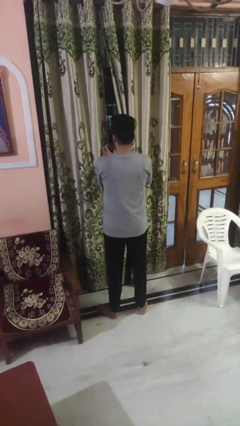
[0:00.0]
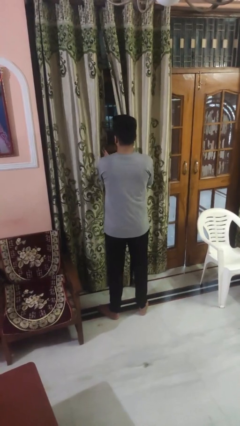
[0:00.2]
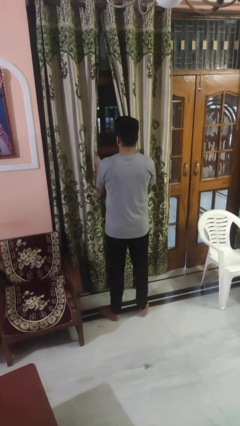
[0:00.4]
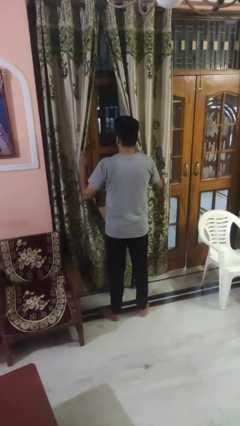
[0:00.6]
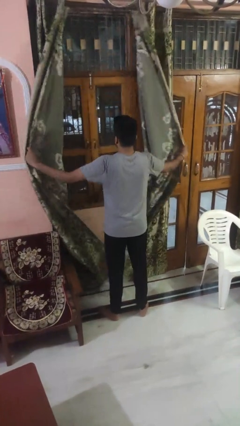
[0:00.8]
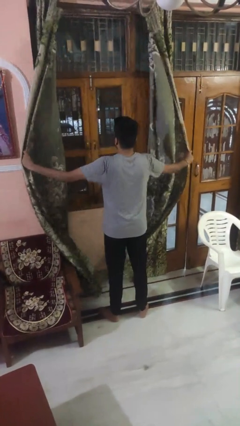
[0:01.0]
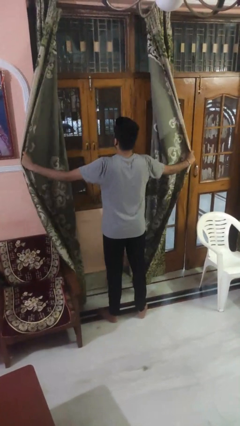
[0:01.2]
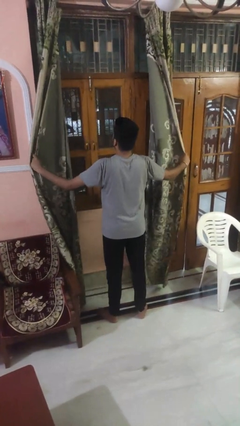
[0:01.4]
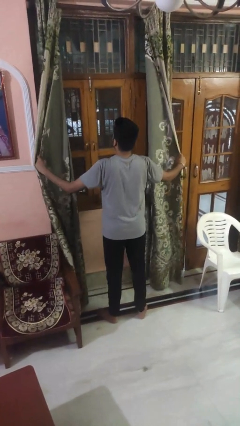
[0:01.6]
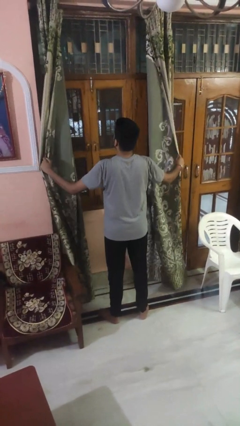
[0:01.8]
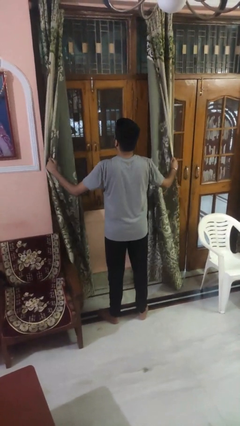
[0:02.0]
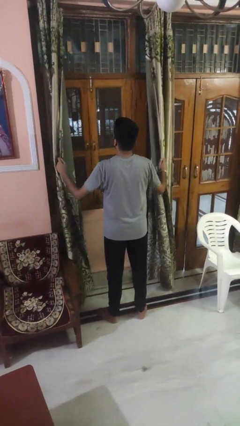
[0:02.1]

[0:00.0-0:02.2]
person opens curtains

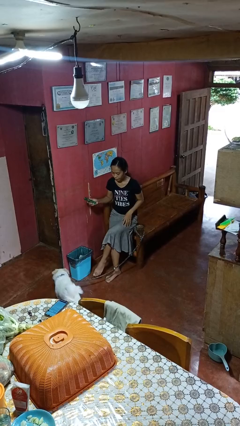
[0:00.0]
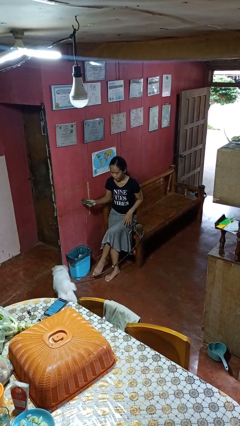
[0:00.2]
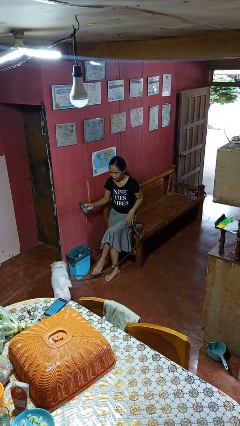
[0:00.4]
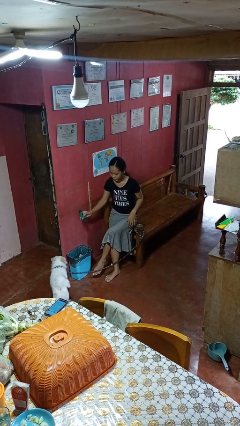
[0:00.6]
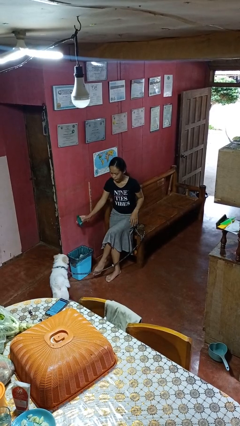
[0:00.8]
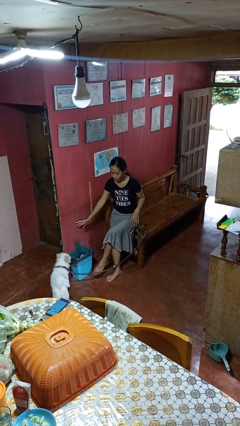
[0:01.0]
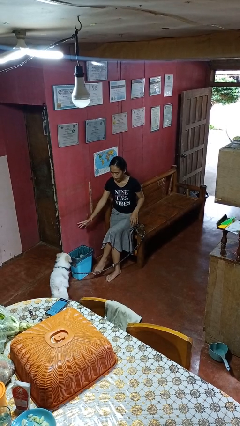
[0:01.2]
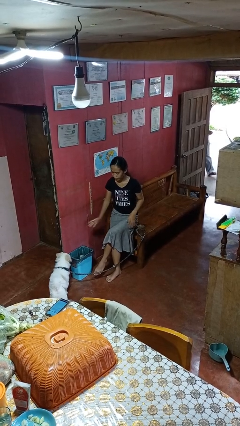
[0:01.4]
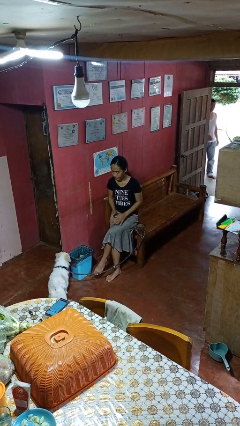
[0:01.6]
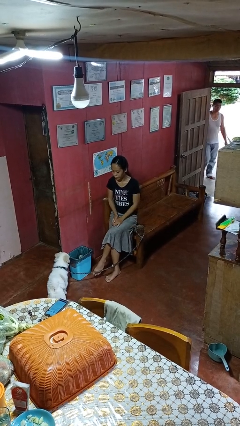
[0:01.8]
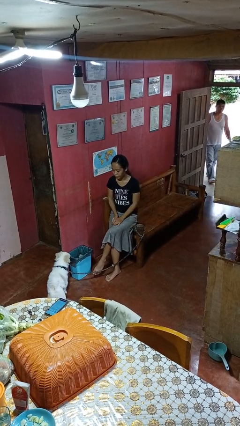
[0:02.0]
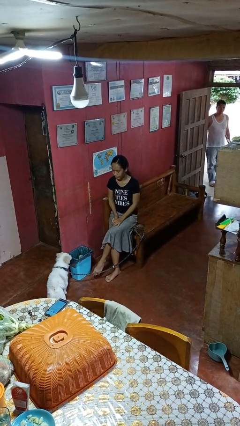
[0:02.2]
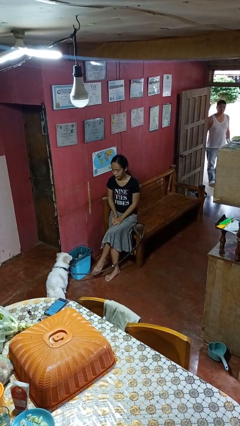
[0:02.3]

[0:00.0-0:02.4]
person discards trash

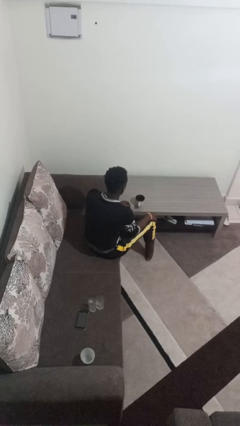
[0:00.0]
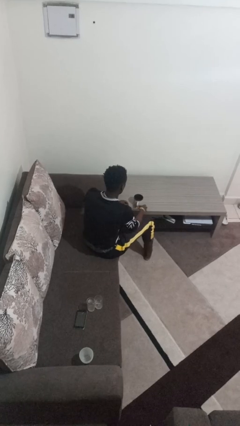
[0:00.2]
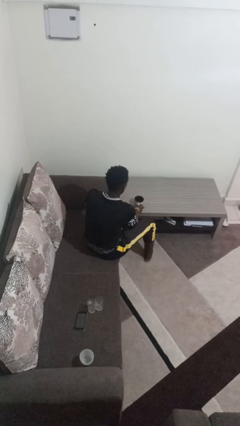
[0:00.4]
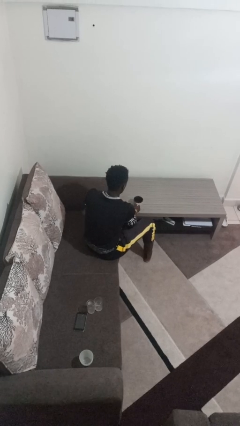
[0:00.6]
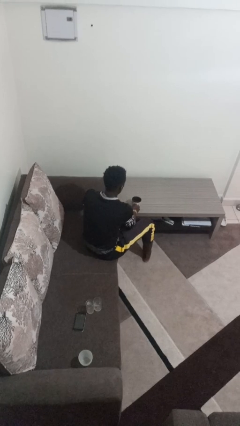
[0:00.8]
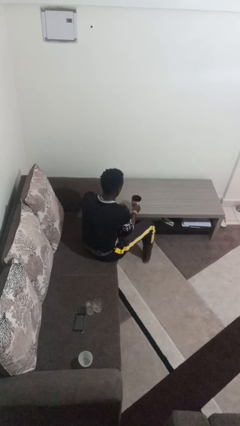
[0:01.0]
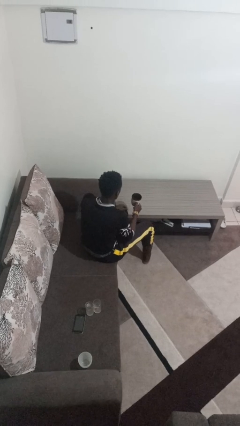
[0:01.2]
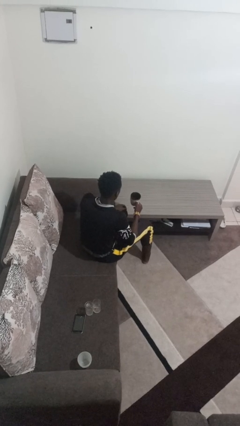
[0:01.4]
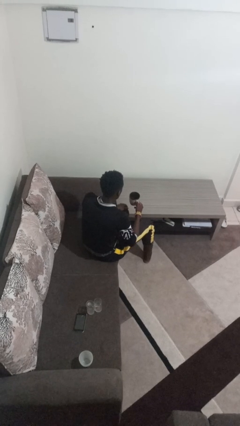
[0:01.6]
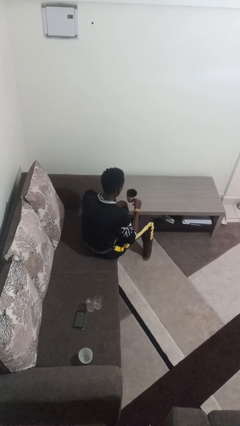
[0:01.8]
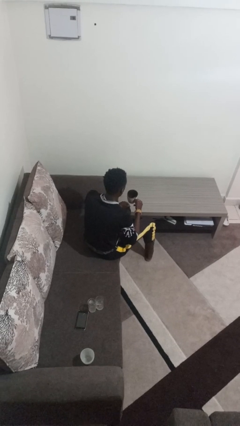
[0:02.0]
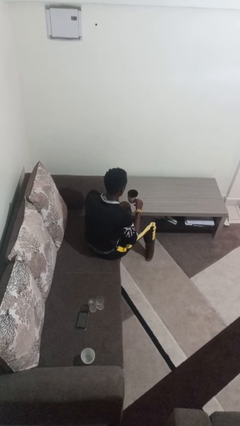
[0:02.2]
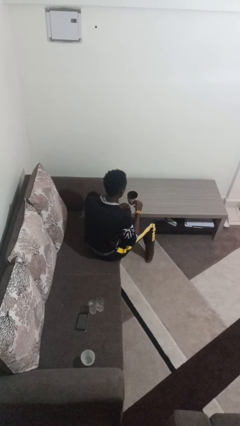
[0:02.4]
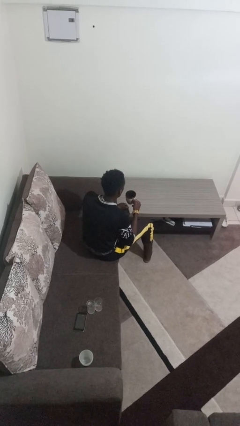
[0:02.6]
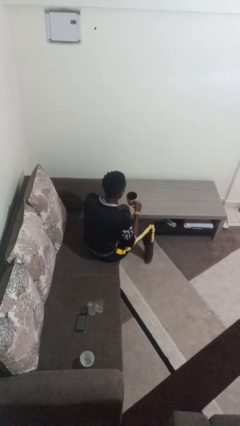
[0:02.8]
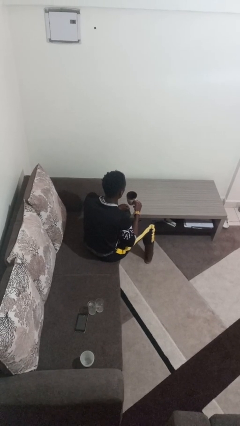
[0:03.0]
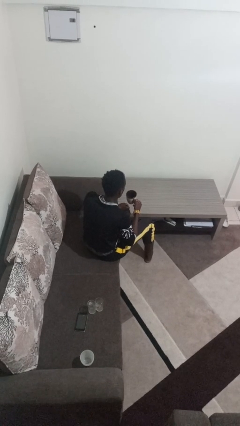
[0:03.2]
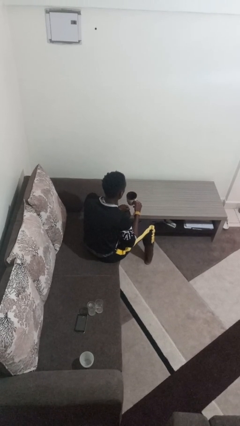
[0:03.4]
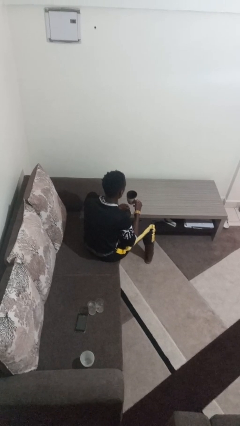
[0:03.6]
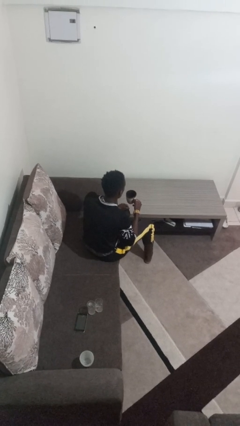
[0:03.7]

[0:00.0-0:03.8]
person picks up object from table

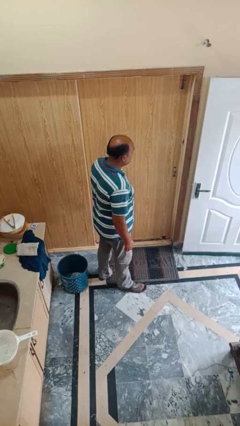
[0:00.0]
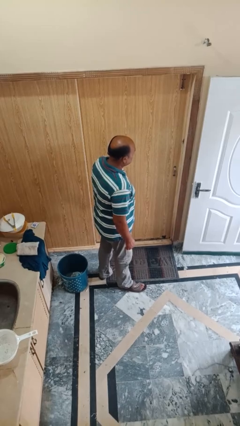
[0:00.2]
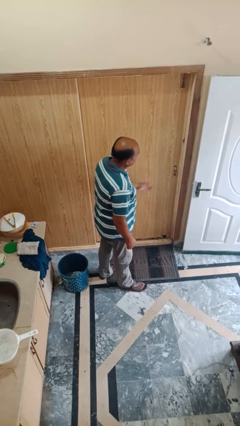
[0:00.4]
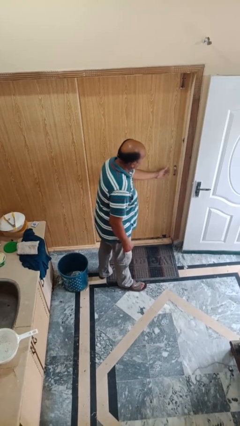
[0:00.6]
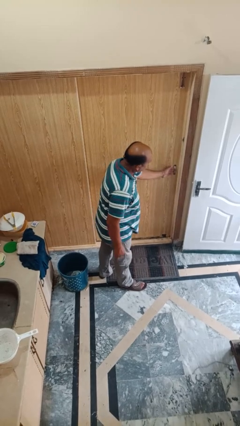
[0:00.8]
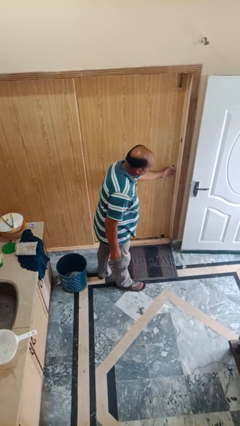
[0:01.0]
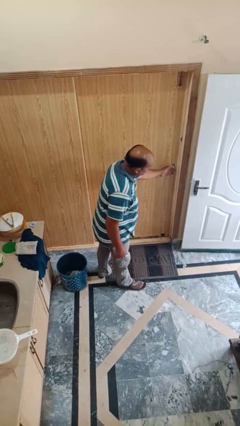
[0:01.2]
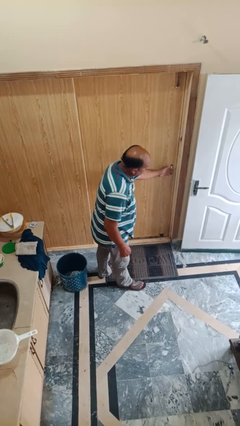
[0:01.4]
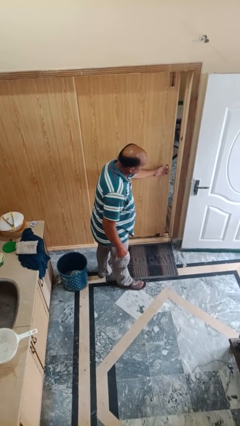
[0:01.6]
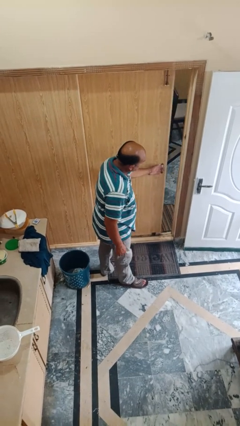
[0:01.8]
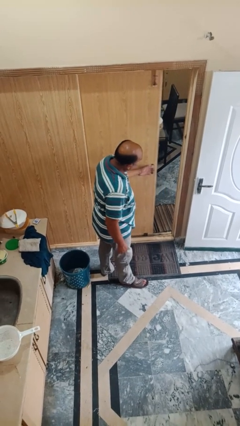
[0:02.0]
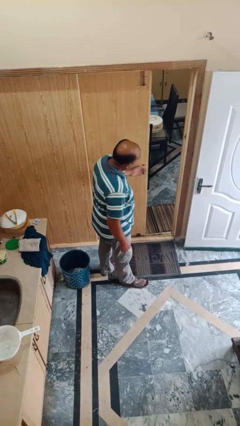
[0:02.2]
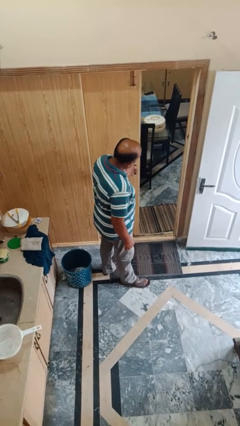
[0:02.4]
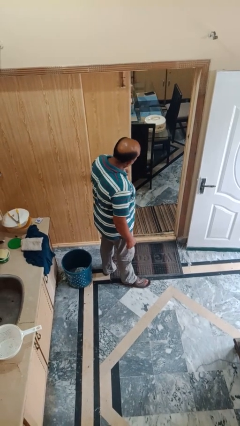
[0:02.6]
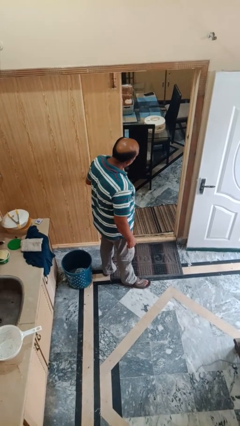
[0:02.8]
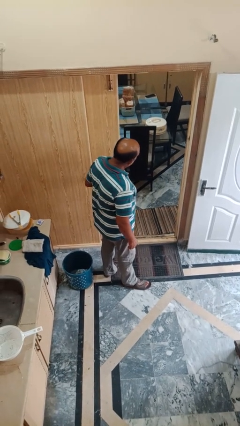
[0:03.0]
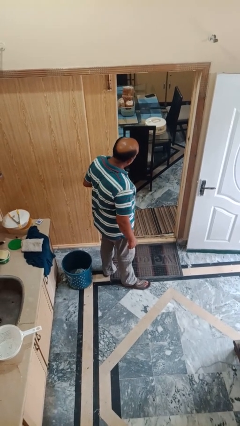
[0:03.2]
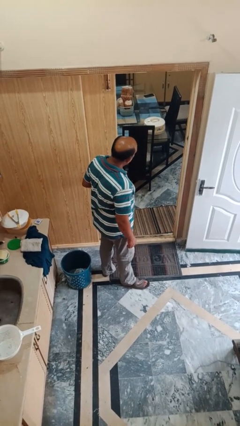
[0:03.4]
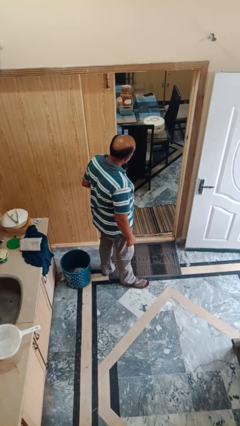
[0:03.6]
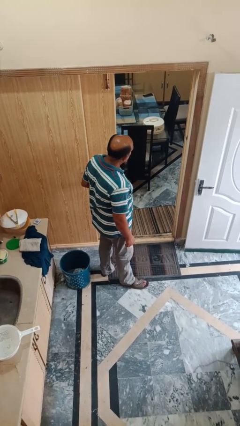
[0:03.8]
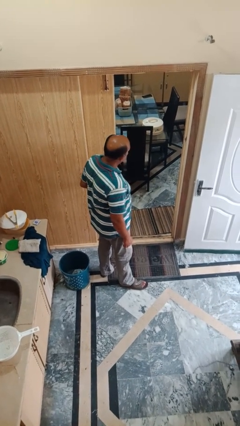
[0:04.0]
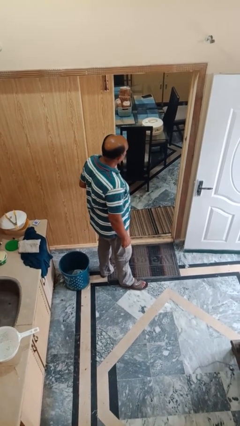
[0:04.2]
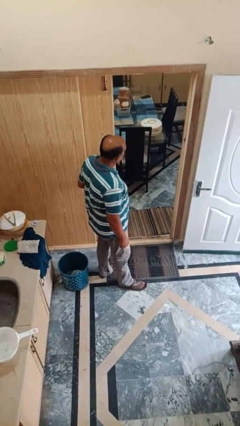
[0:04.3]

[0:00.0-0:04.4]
person opens sliding door

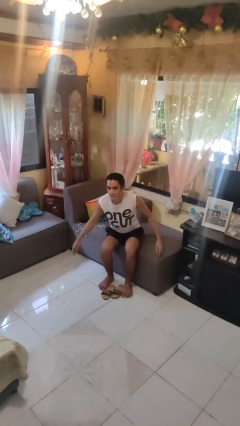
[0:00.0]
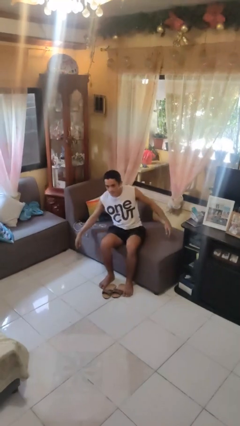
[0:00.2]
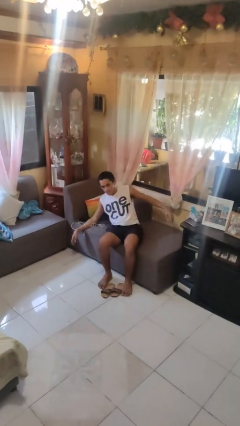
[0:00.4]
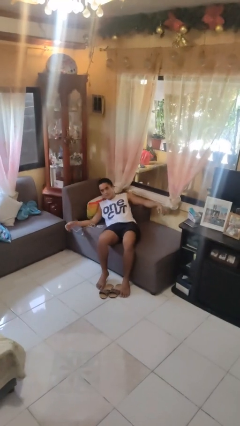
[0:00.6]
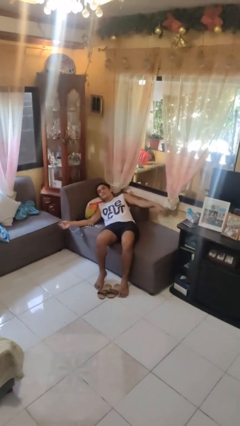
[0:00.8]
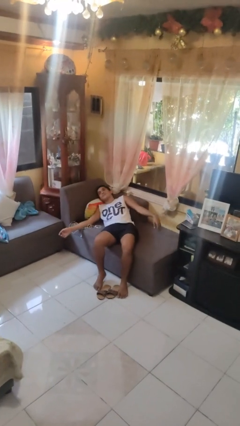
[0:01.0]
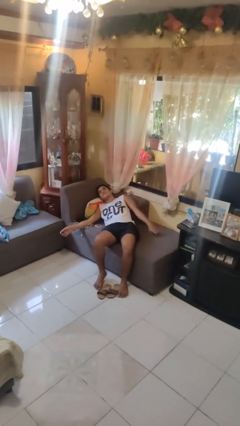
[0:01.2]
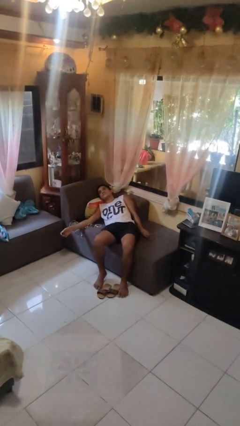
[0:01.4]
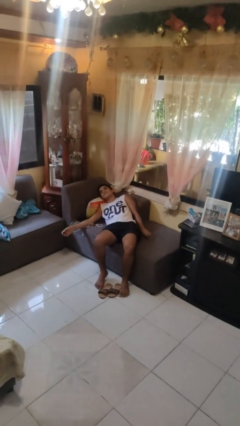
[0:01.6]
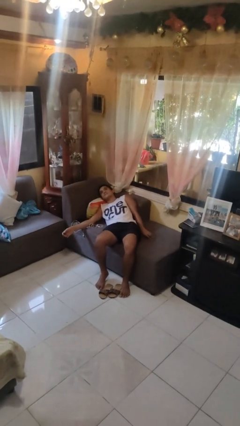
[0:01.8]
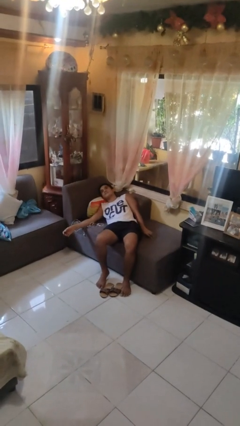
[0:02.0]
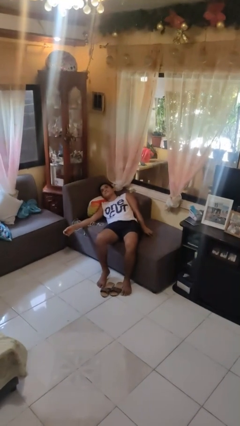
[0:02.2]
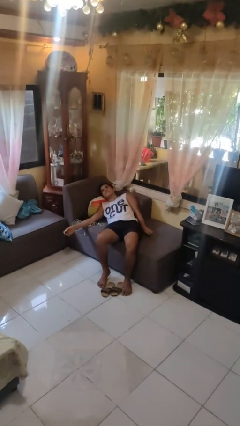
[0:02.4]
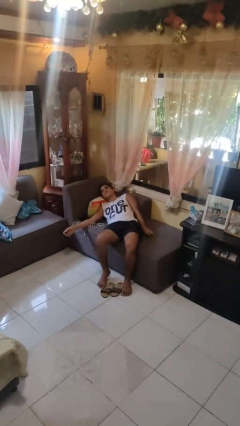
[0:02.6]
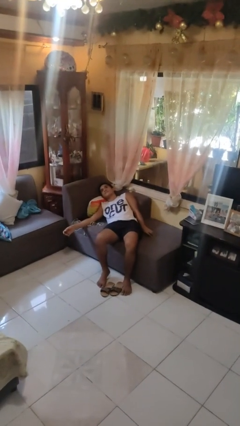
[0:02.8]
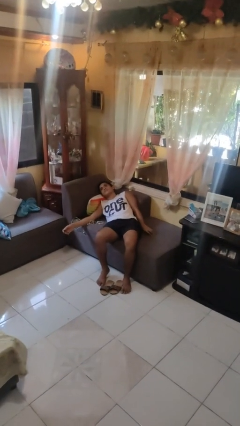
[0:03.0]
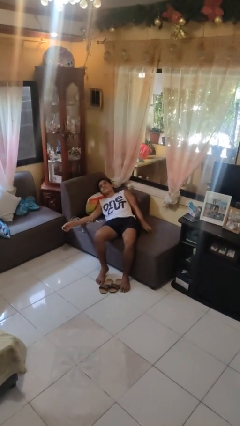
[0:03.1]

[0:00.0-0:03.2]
person lies down on couch

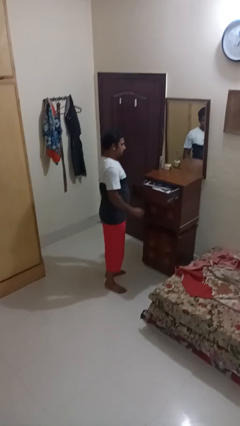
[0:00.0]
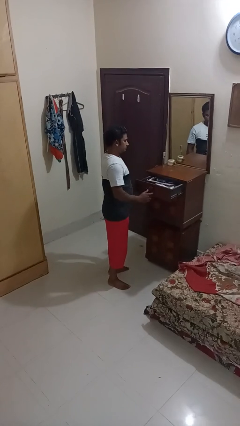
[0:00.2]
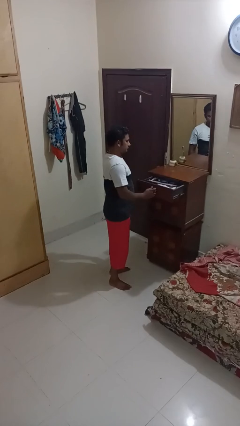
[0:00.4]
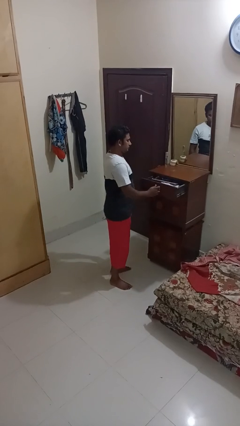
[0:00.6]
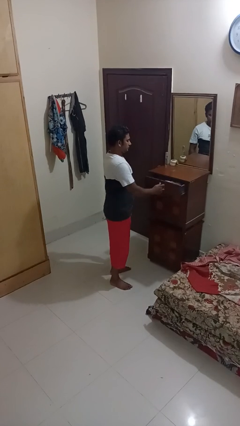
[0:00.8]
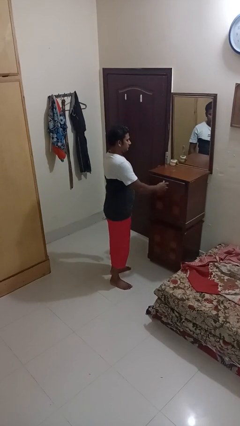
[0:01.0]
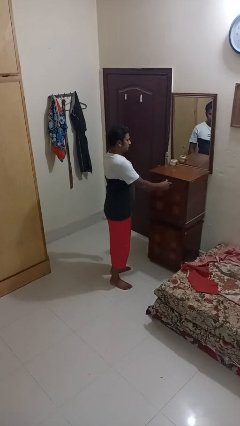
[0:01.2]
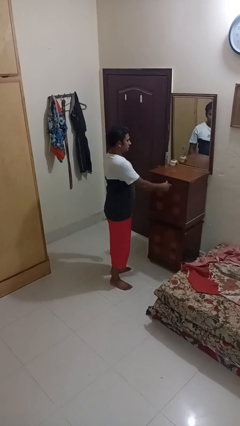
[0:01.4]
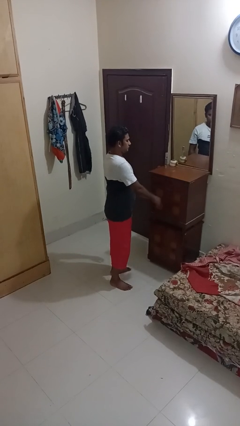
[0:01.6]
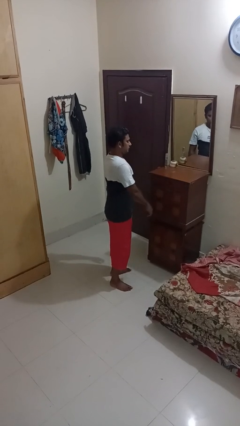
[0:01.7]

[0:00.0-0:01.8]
person closes dresser drawer
